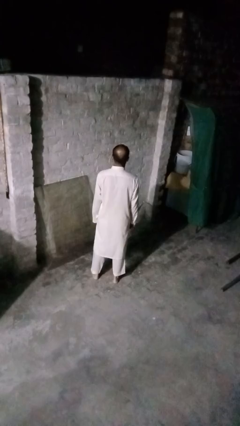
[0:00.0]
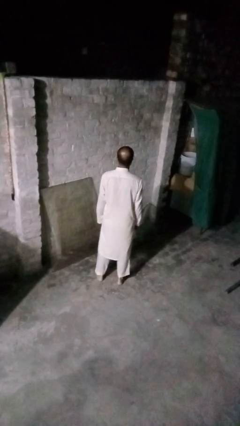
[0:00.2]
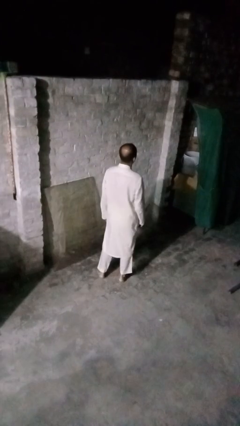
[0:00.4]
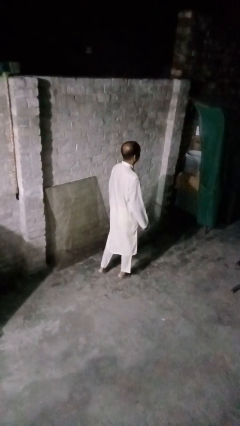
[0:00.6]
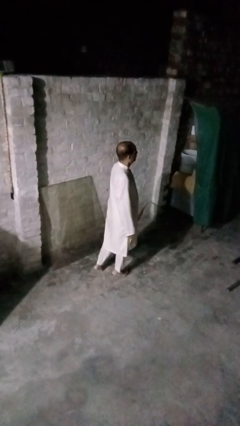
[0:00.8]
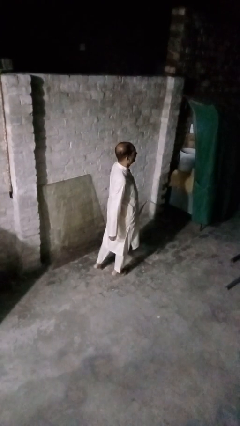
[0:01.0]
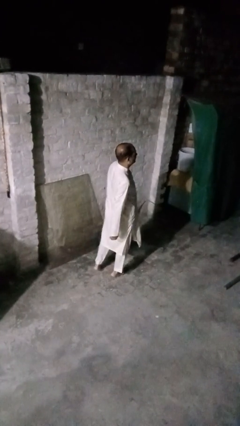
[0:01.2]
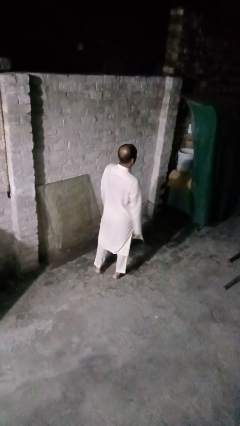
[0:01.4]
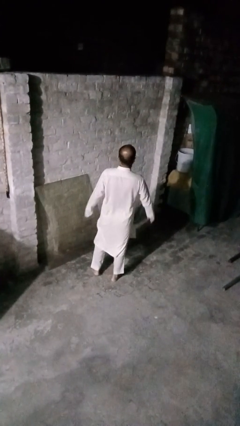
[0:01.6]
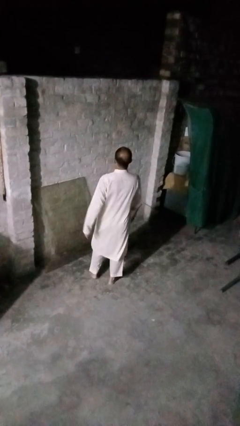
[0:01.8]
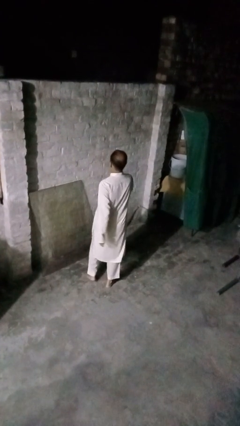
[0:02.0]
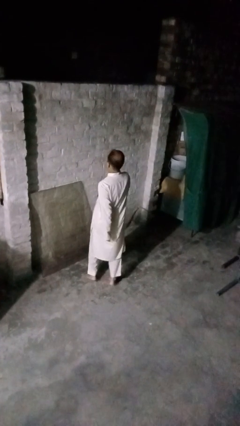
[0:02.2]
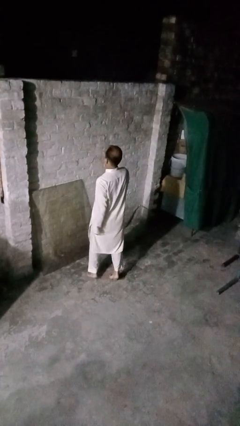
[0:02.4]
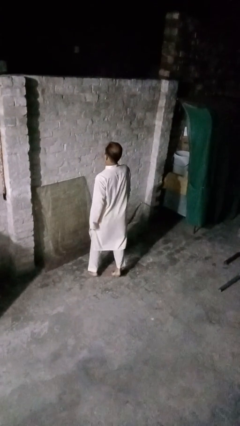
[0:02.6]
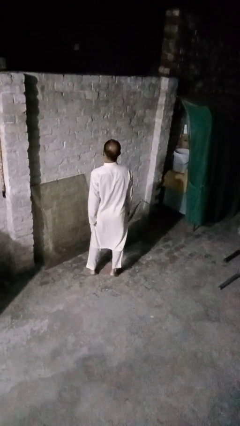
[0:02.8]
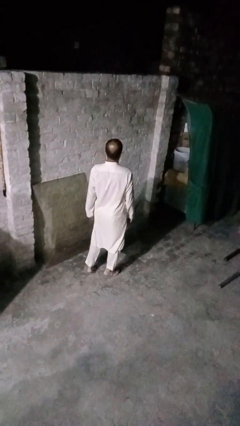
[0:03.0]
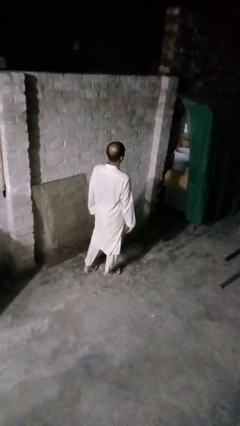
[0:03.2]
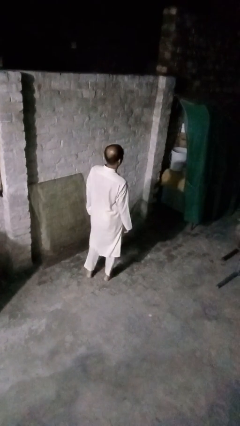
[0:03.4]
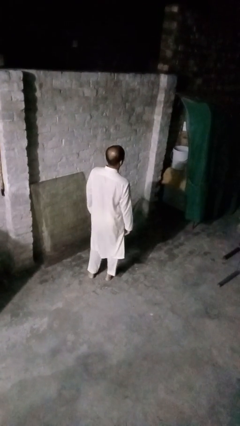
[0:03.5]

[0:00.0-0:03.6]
person twirls

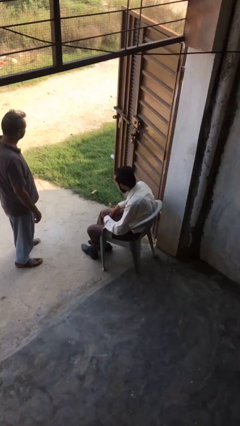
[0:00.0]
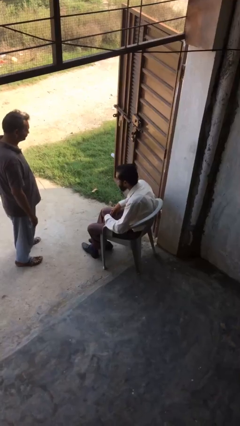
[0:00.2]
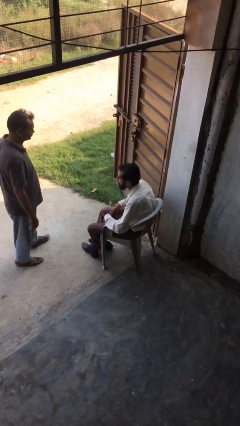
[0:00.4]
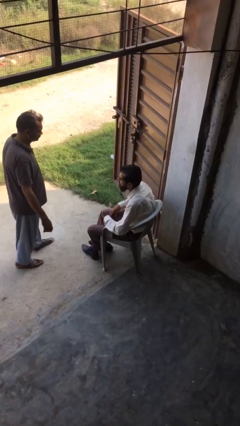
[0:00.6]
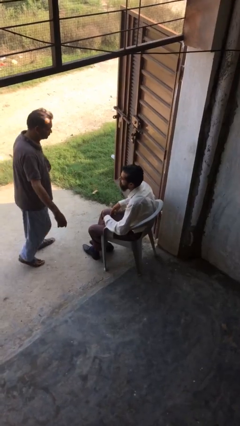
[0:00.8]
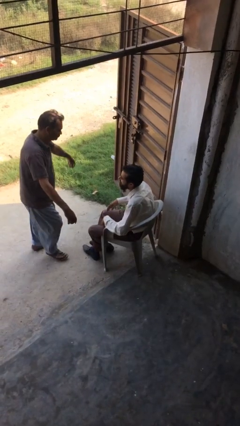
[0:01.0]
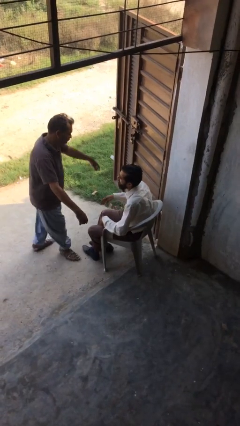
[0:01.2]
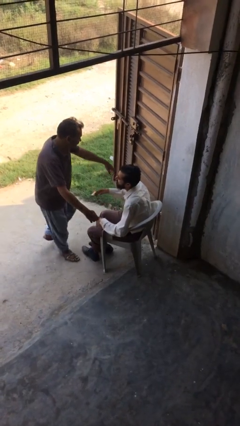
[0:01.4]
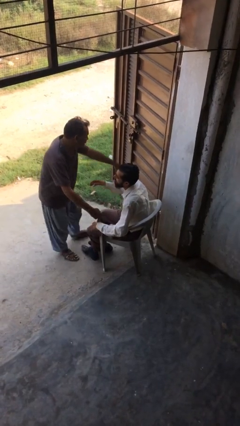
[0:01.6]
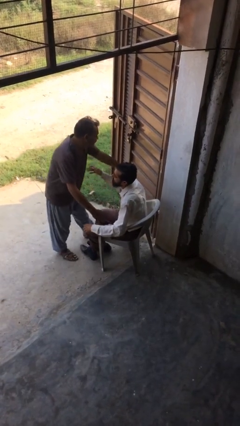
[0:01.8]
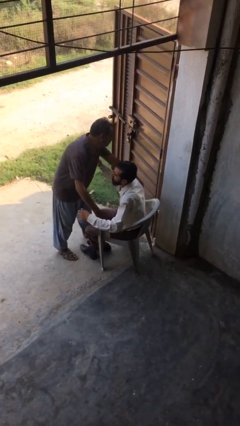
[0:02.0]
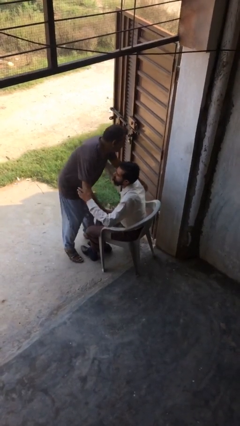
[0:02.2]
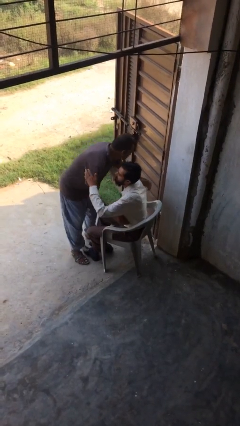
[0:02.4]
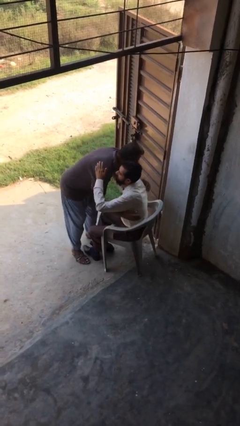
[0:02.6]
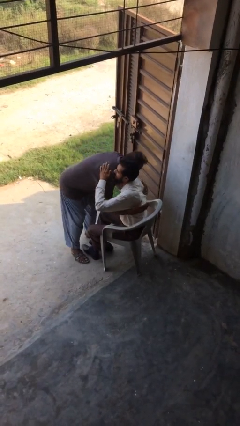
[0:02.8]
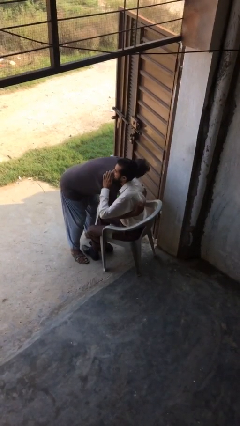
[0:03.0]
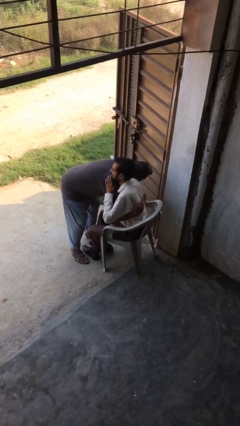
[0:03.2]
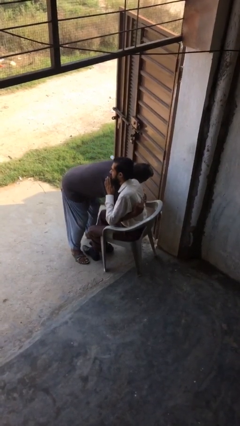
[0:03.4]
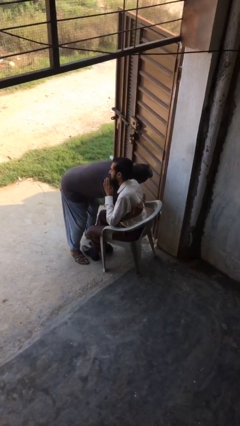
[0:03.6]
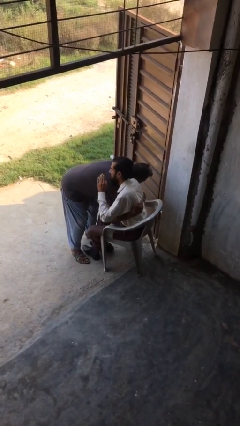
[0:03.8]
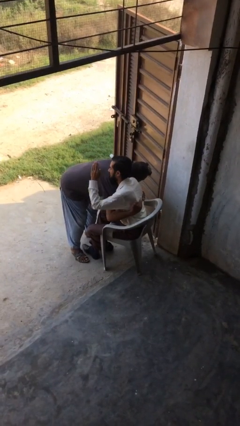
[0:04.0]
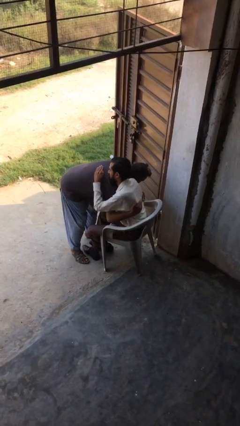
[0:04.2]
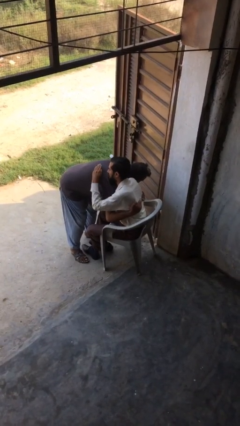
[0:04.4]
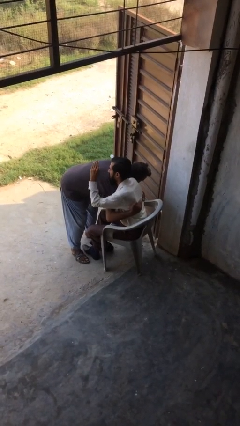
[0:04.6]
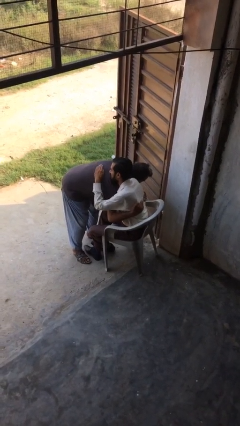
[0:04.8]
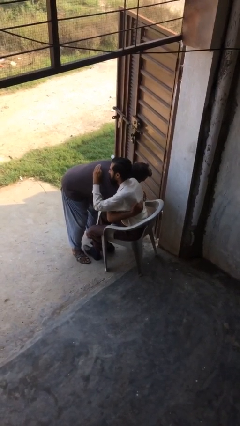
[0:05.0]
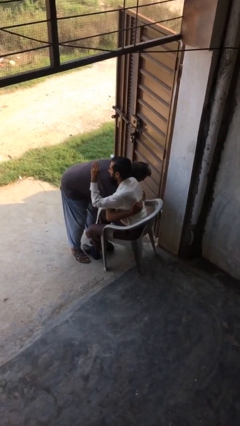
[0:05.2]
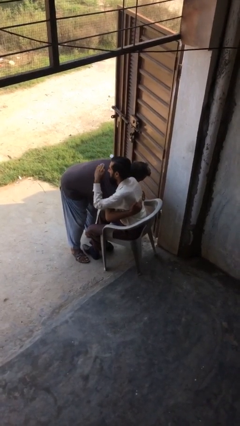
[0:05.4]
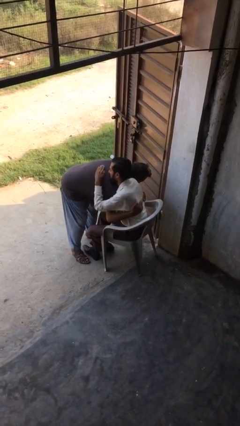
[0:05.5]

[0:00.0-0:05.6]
person embraces person

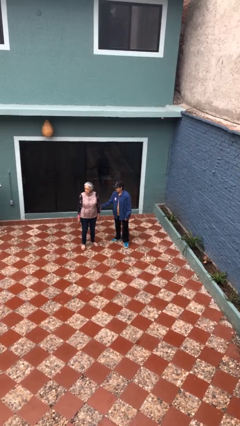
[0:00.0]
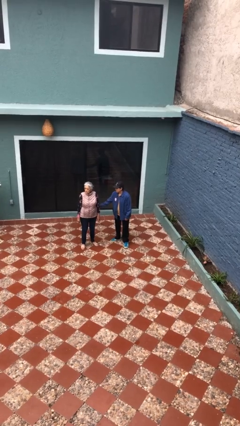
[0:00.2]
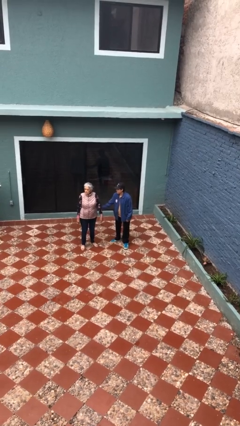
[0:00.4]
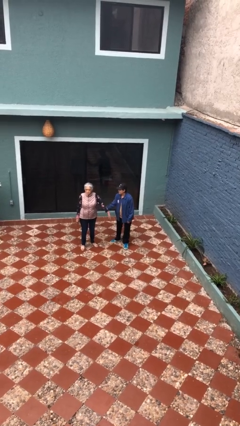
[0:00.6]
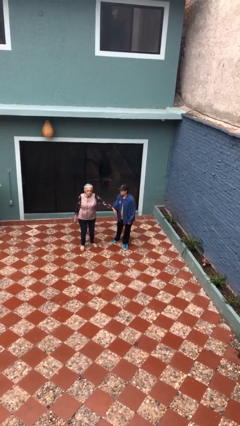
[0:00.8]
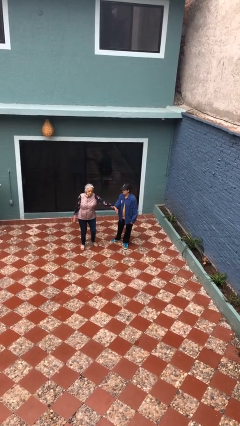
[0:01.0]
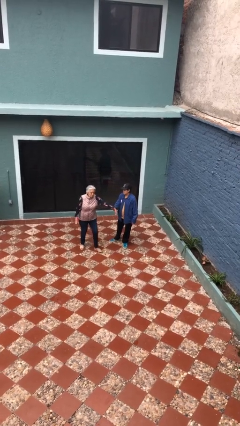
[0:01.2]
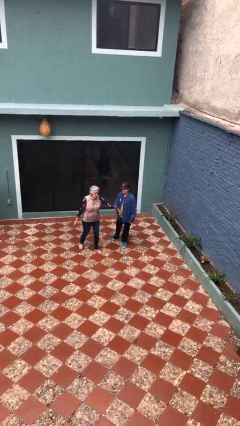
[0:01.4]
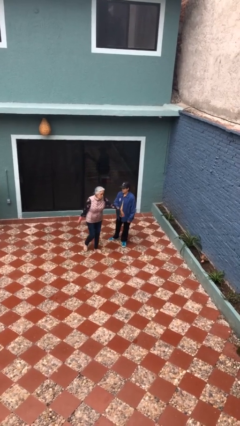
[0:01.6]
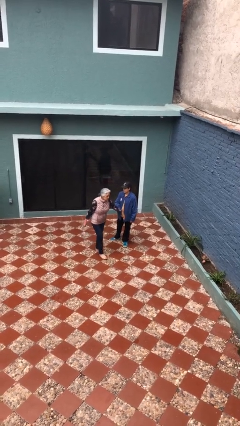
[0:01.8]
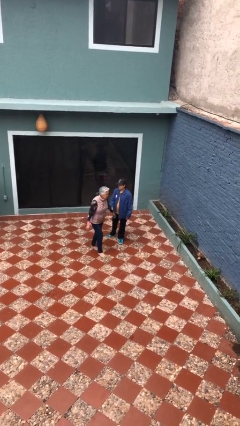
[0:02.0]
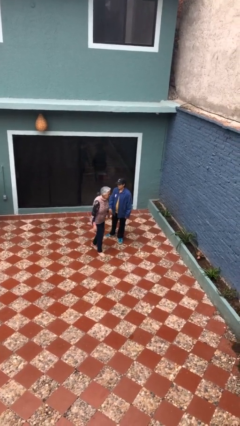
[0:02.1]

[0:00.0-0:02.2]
person grabs person by forearm

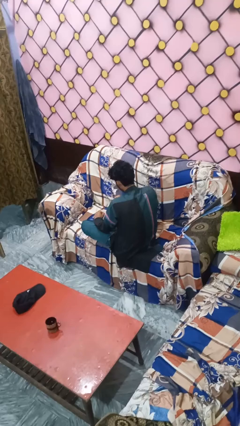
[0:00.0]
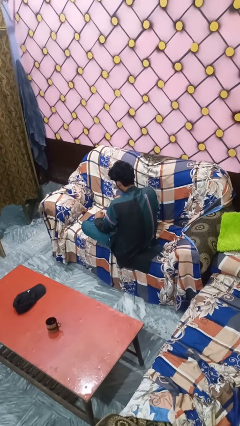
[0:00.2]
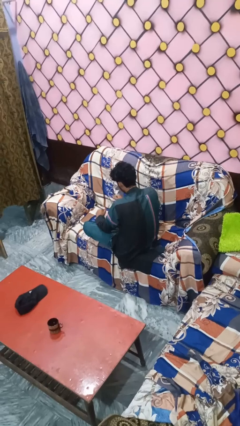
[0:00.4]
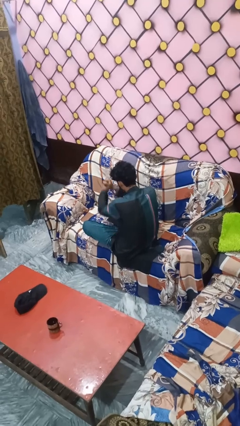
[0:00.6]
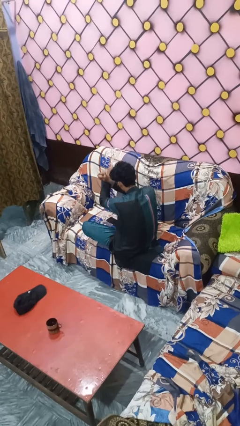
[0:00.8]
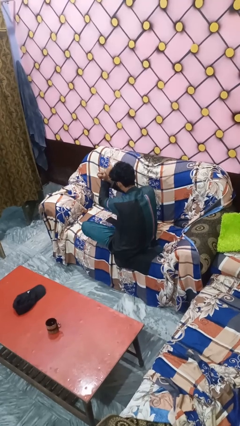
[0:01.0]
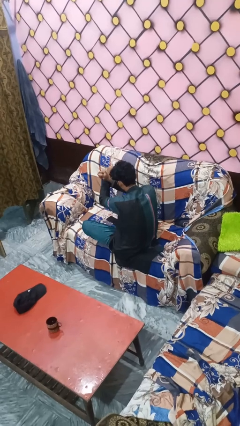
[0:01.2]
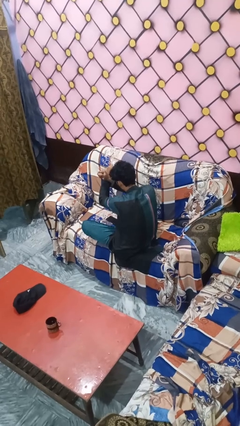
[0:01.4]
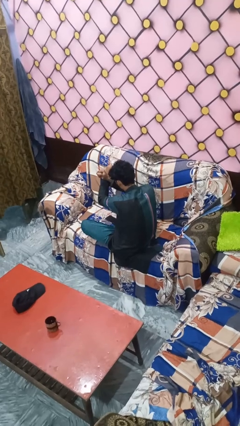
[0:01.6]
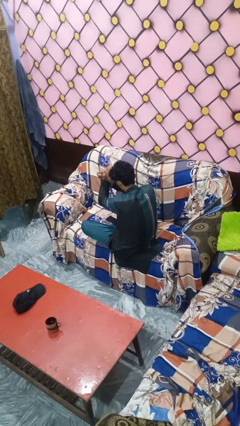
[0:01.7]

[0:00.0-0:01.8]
person gestures arms x

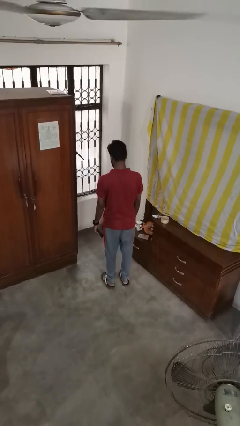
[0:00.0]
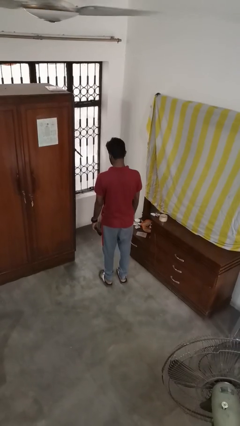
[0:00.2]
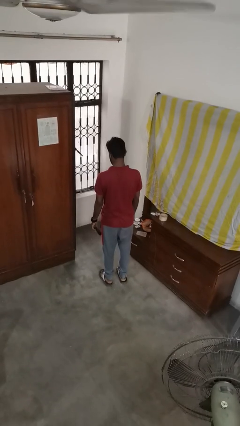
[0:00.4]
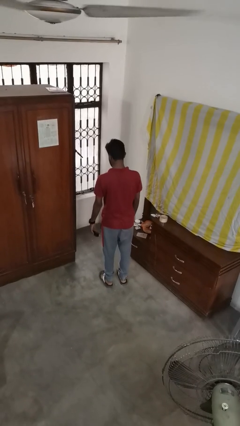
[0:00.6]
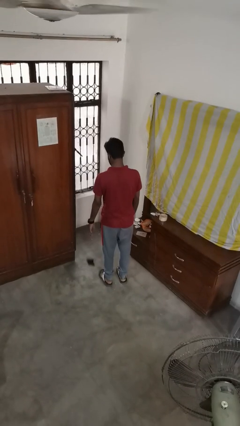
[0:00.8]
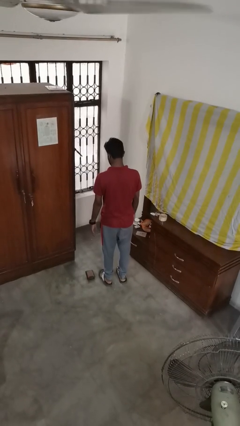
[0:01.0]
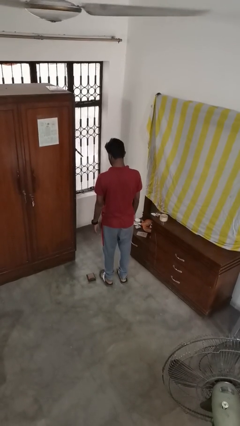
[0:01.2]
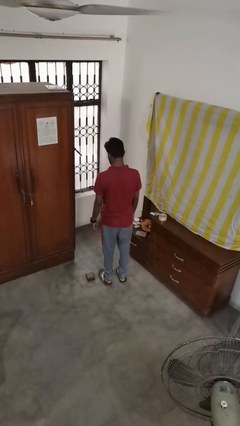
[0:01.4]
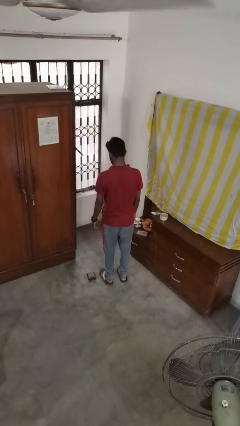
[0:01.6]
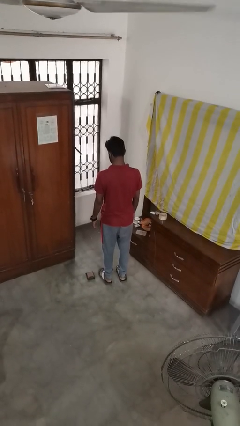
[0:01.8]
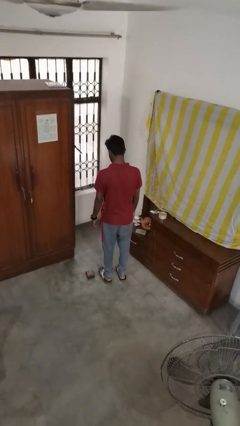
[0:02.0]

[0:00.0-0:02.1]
person throws object to ground

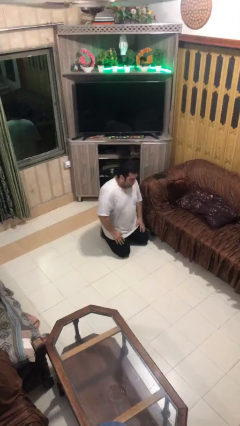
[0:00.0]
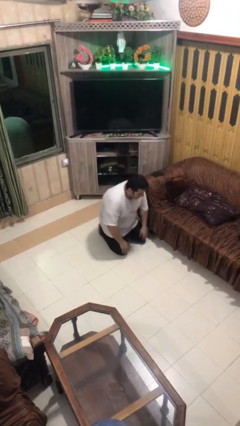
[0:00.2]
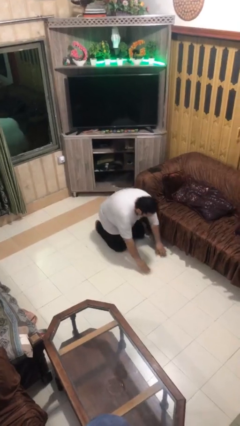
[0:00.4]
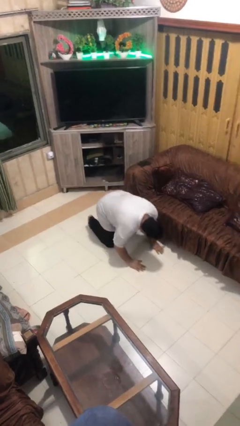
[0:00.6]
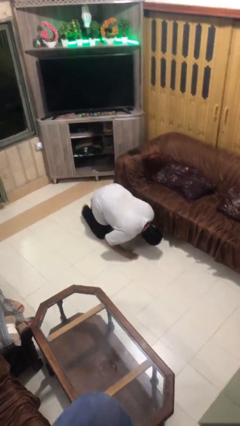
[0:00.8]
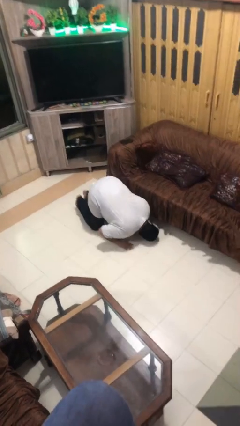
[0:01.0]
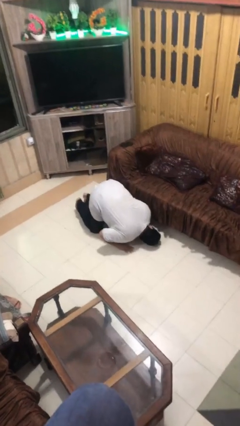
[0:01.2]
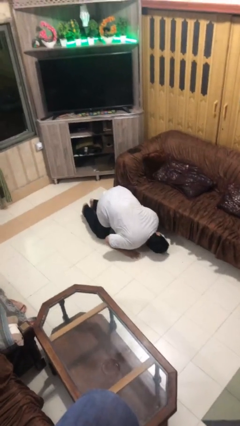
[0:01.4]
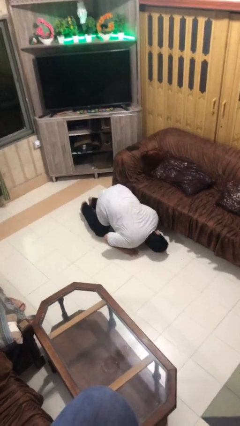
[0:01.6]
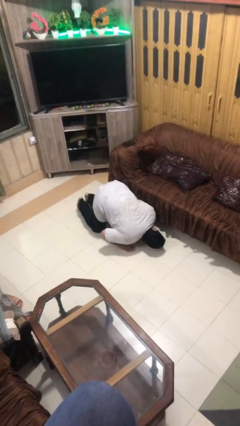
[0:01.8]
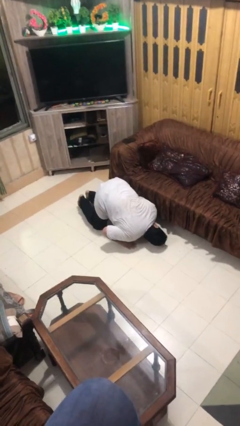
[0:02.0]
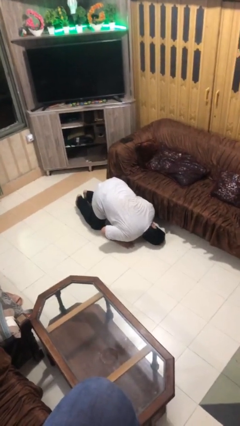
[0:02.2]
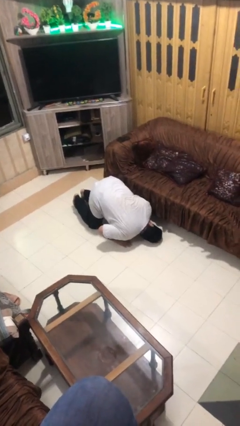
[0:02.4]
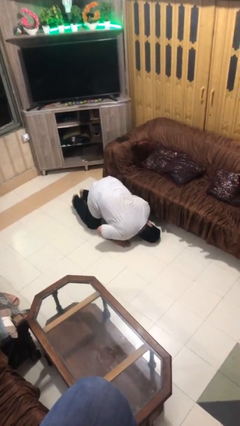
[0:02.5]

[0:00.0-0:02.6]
person searches under couch
